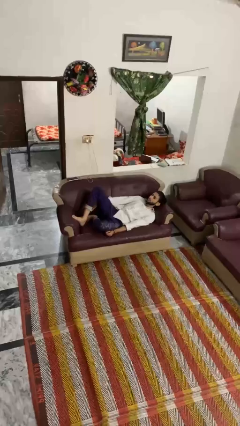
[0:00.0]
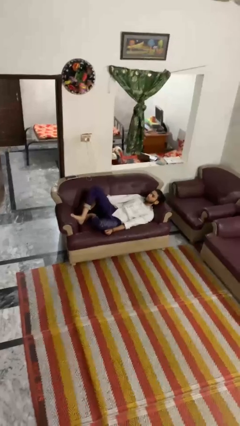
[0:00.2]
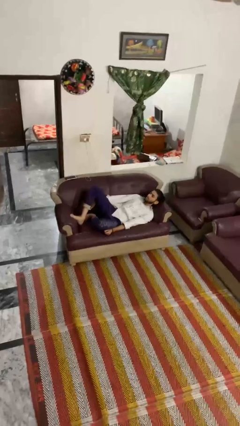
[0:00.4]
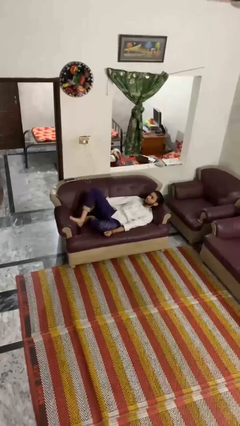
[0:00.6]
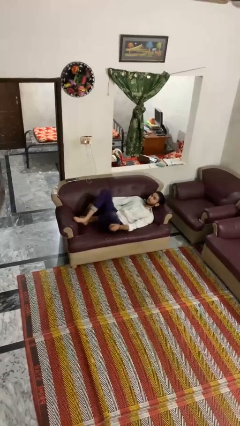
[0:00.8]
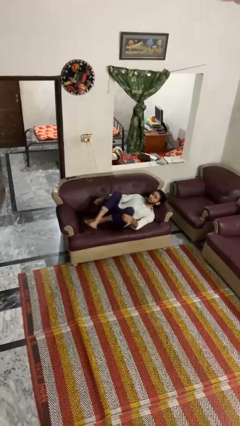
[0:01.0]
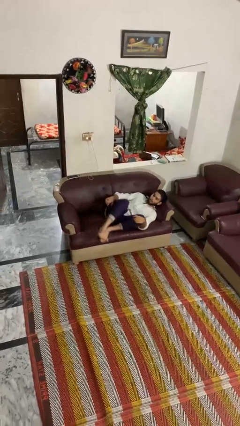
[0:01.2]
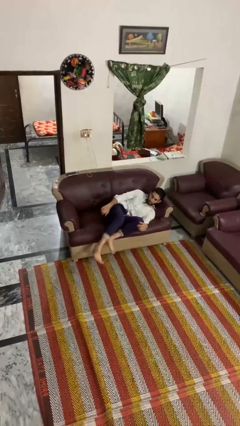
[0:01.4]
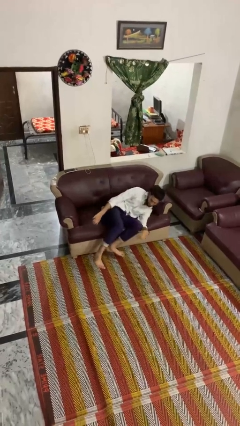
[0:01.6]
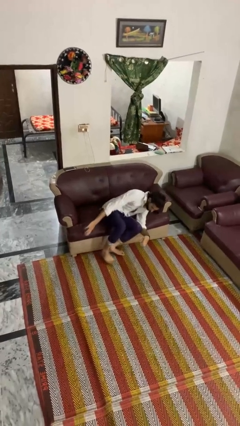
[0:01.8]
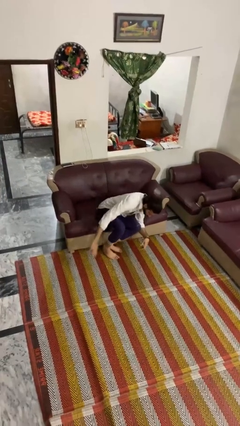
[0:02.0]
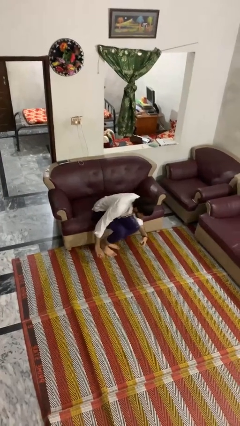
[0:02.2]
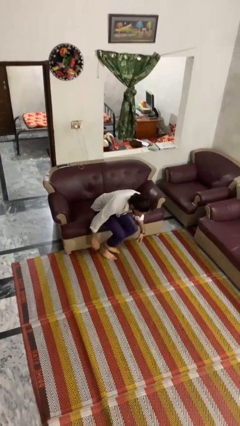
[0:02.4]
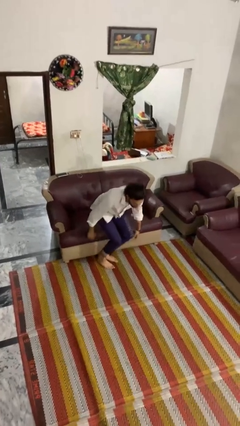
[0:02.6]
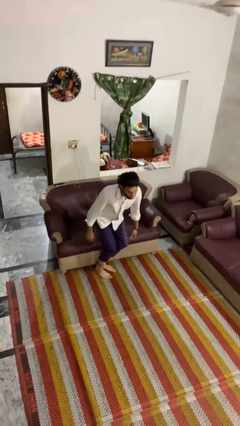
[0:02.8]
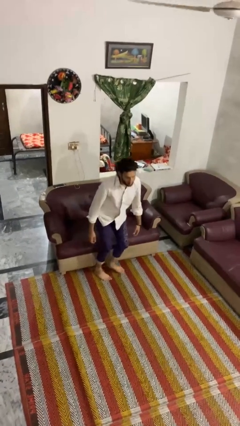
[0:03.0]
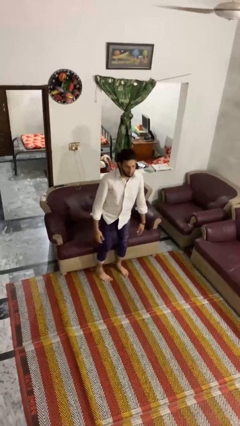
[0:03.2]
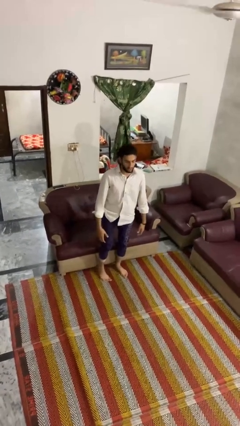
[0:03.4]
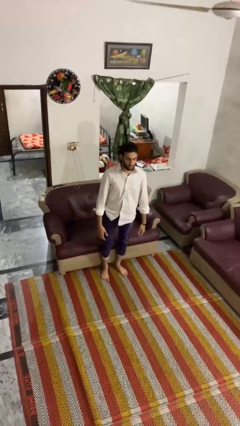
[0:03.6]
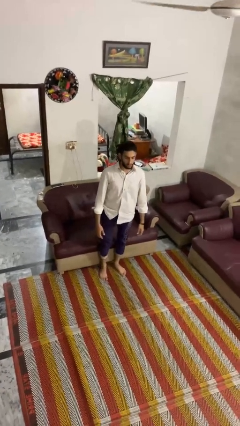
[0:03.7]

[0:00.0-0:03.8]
person stands up

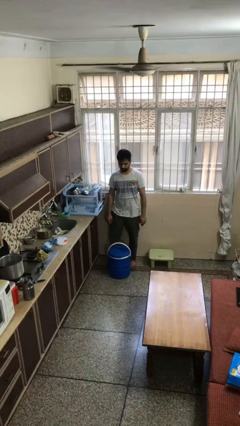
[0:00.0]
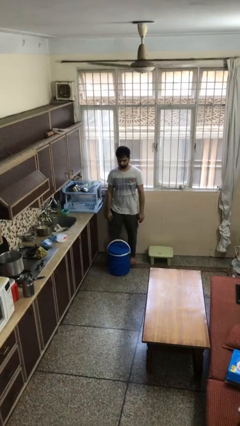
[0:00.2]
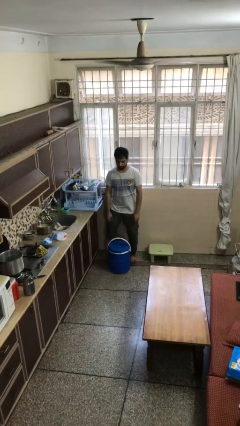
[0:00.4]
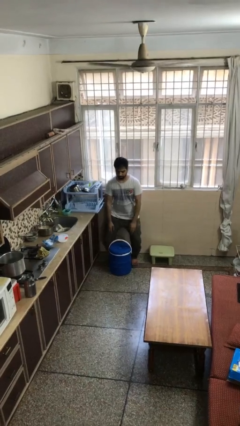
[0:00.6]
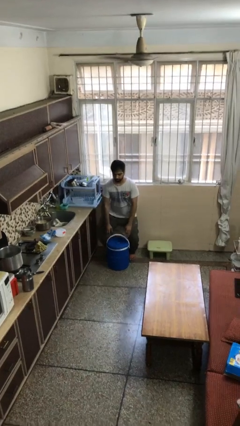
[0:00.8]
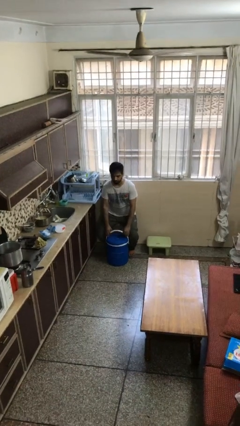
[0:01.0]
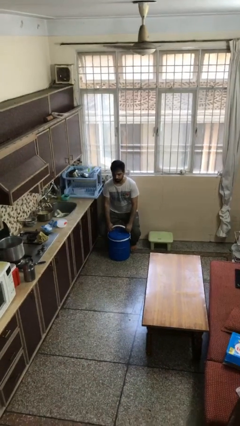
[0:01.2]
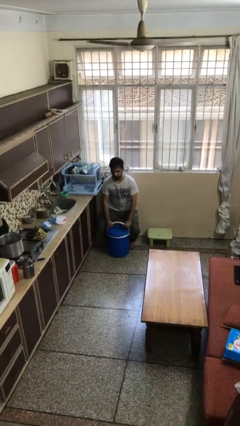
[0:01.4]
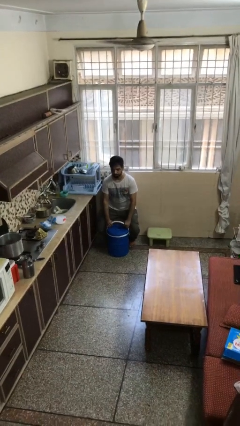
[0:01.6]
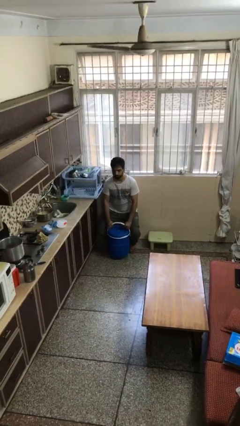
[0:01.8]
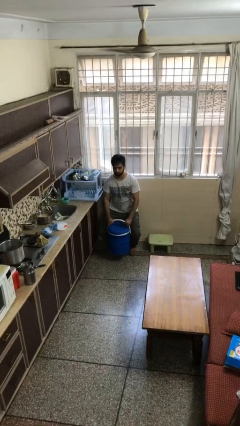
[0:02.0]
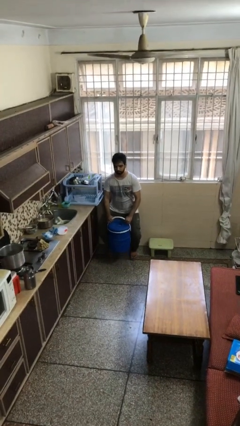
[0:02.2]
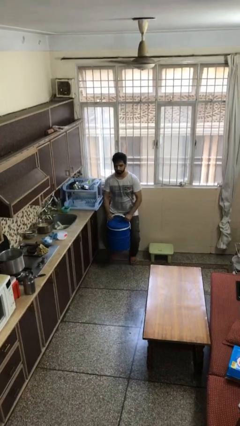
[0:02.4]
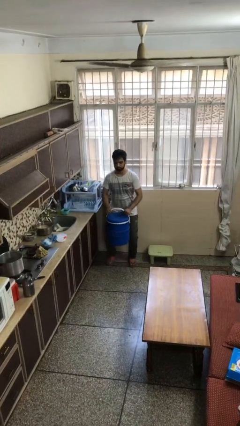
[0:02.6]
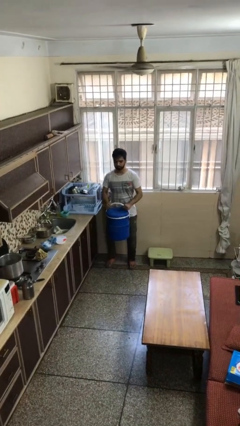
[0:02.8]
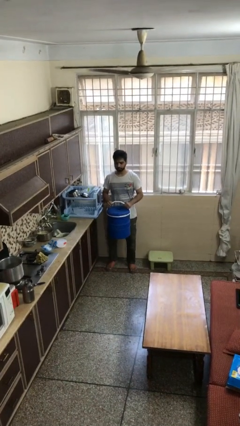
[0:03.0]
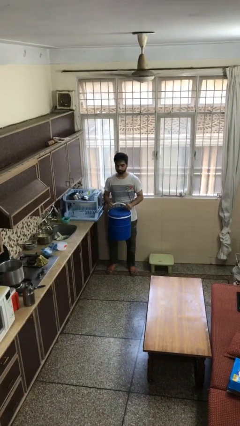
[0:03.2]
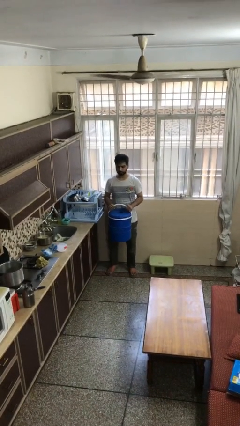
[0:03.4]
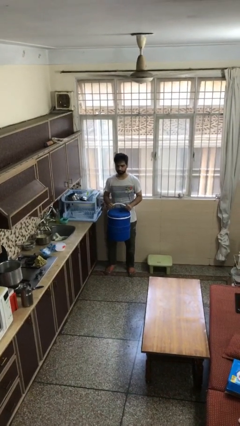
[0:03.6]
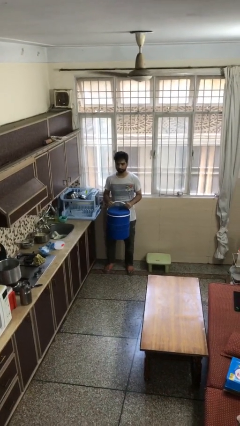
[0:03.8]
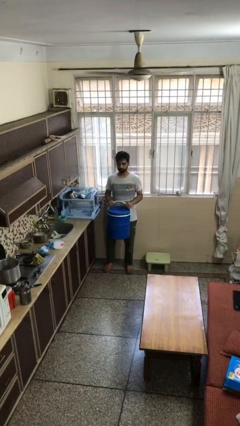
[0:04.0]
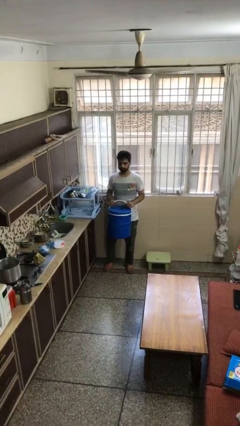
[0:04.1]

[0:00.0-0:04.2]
person picks up object from floor

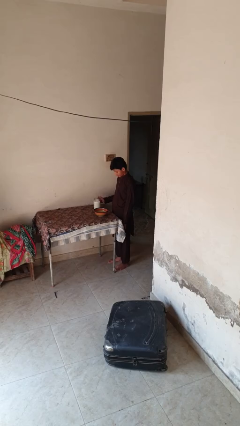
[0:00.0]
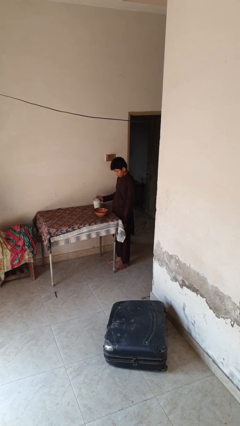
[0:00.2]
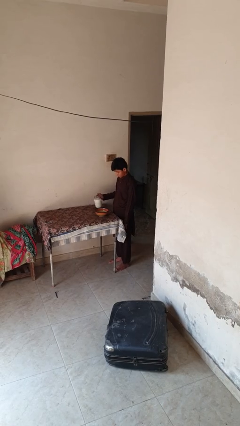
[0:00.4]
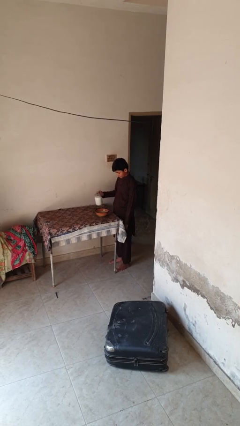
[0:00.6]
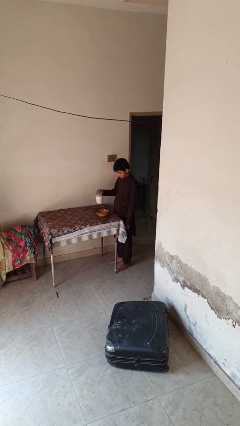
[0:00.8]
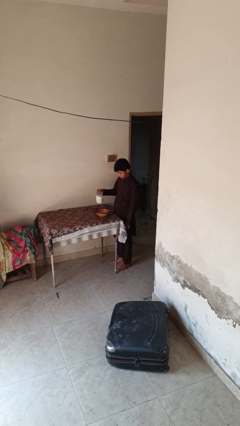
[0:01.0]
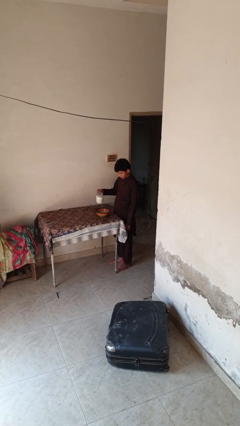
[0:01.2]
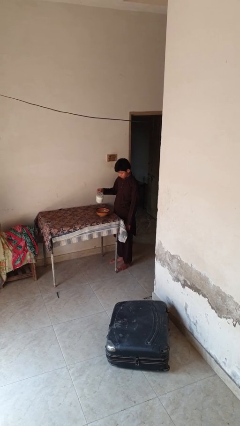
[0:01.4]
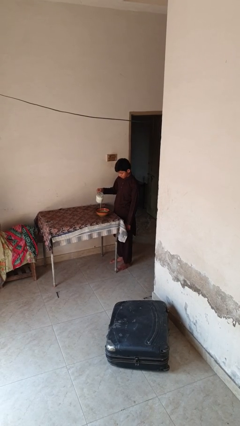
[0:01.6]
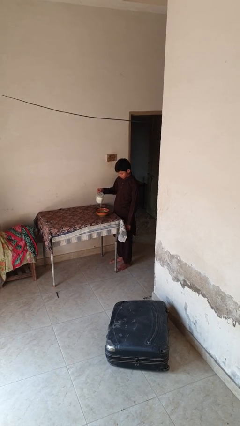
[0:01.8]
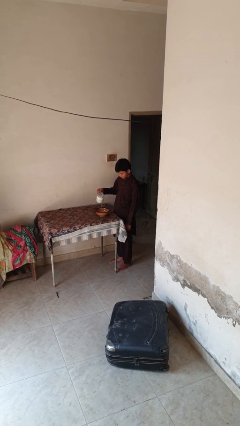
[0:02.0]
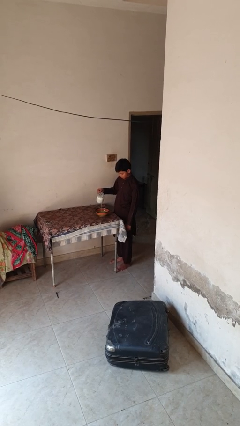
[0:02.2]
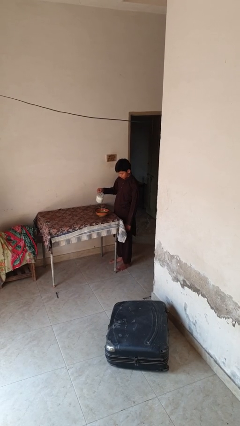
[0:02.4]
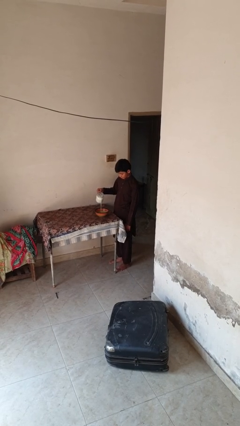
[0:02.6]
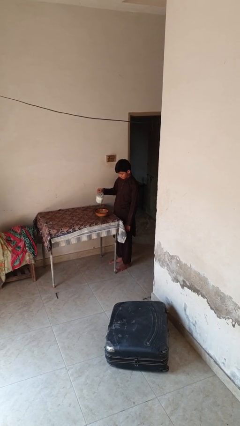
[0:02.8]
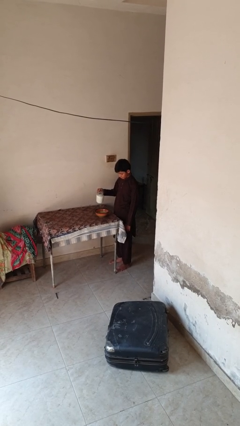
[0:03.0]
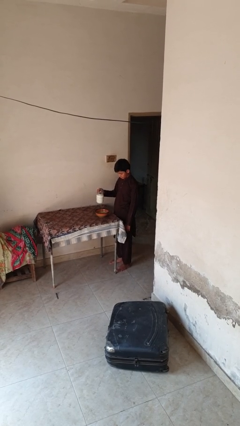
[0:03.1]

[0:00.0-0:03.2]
person pours into bowl

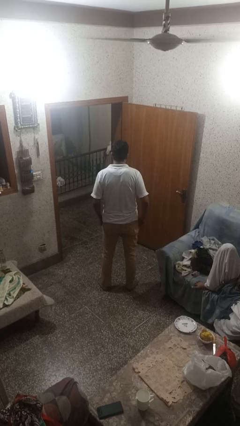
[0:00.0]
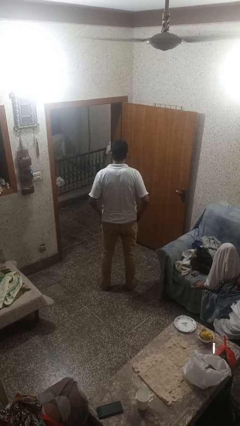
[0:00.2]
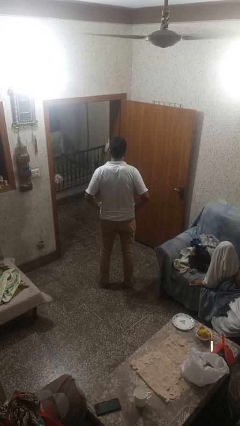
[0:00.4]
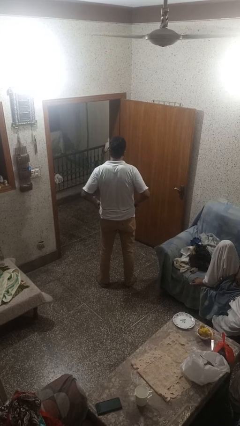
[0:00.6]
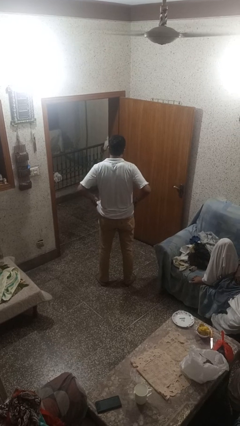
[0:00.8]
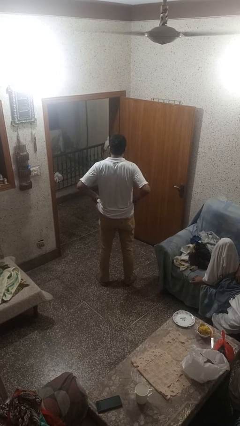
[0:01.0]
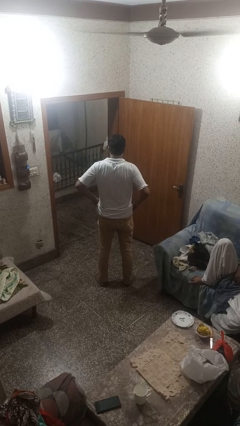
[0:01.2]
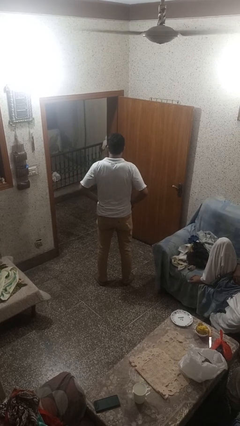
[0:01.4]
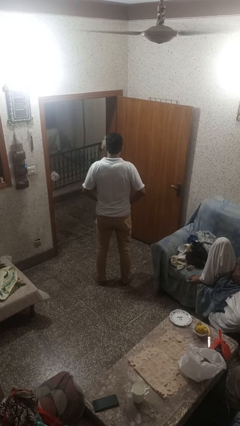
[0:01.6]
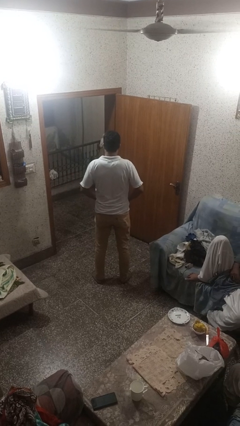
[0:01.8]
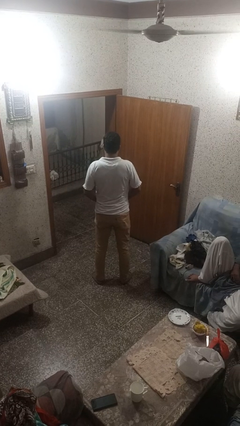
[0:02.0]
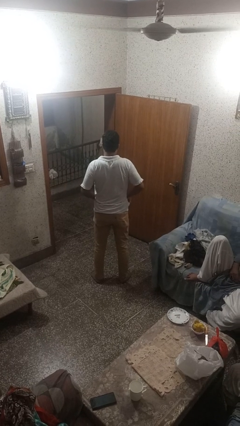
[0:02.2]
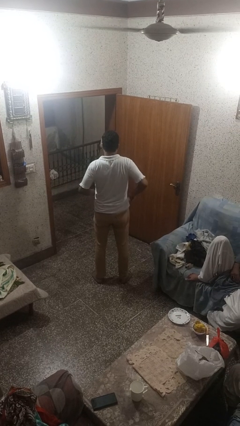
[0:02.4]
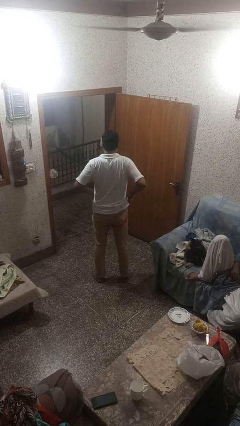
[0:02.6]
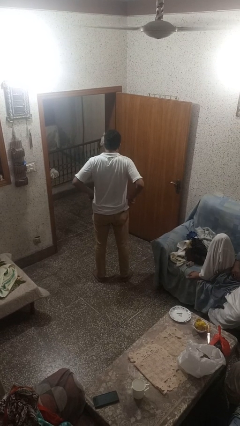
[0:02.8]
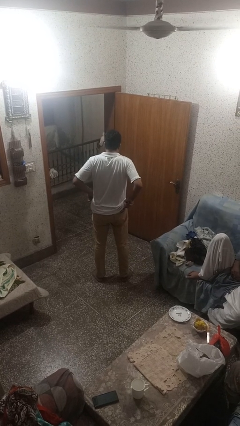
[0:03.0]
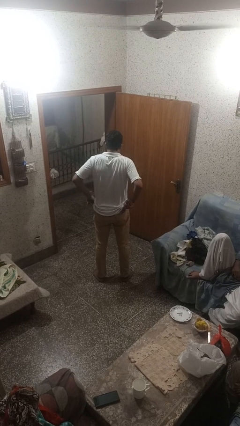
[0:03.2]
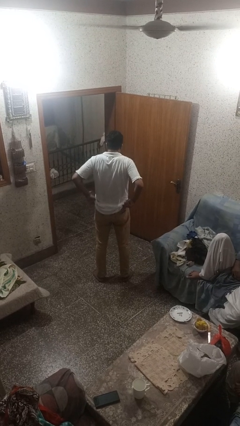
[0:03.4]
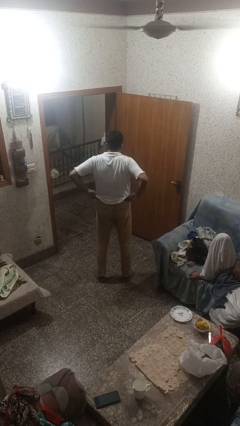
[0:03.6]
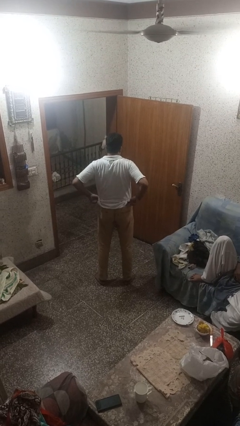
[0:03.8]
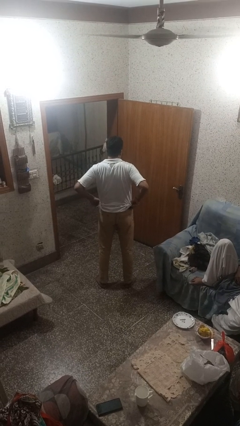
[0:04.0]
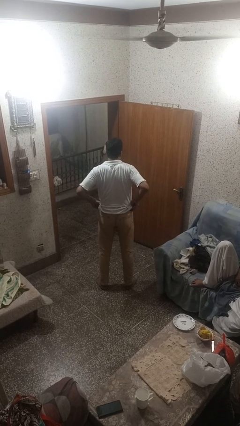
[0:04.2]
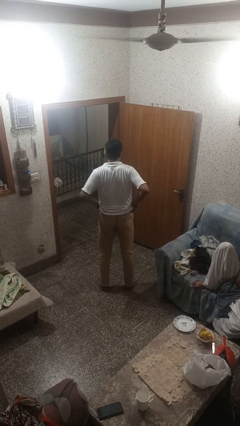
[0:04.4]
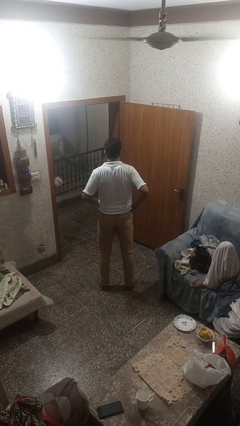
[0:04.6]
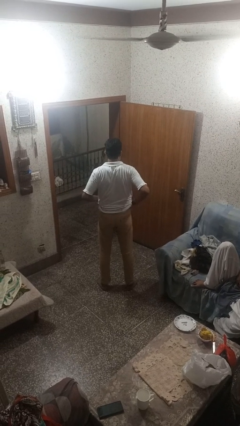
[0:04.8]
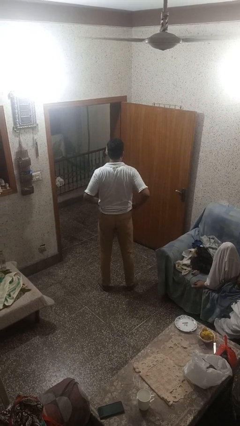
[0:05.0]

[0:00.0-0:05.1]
person hikes up pants

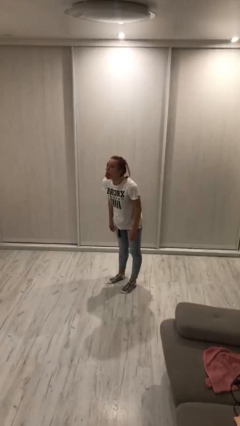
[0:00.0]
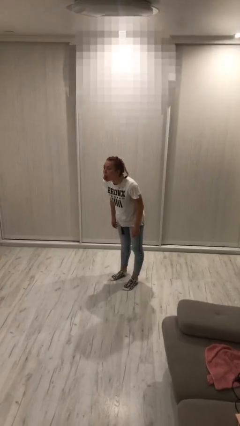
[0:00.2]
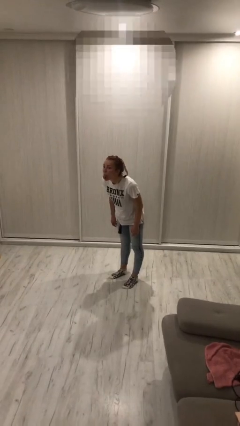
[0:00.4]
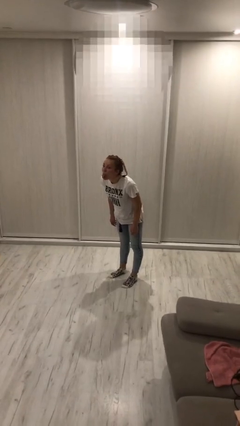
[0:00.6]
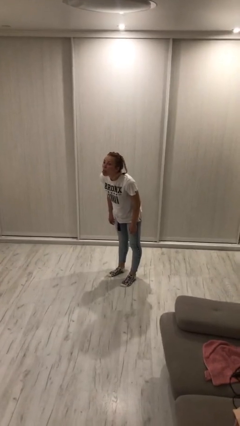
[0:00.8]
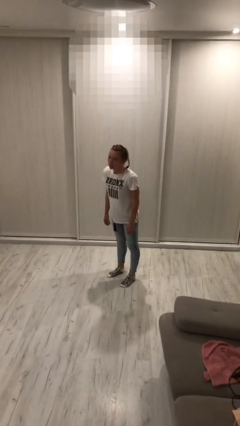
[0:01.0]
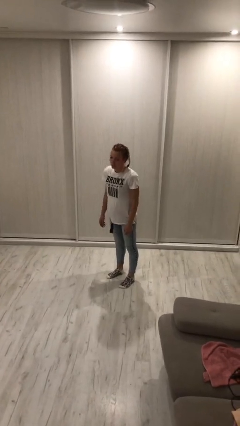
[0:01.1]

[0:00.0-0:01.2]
person sticks out tongue

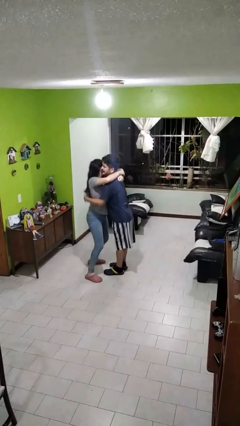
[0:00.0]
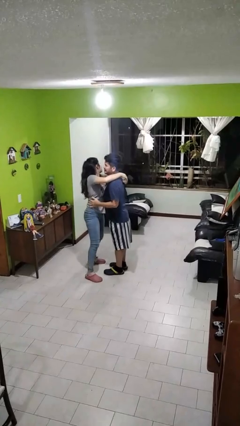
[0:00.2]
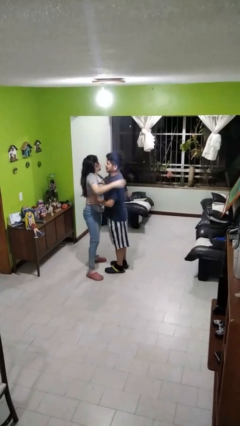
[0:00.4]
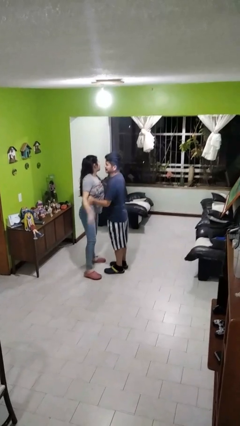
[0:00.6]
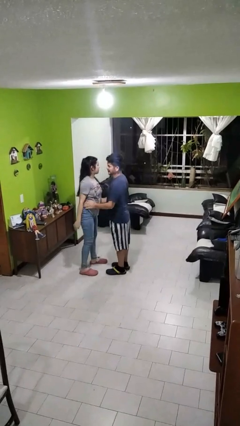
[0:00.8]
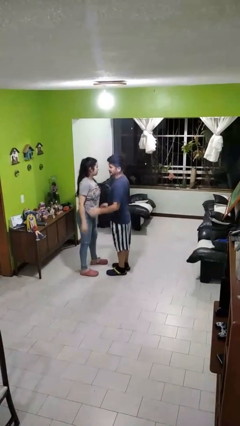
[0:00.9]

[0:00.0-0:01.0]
person puts down person
